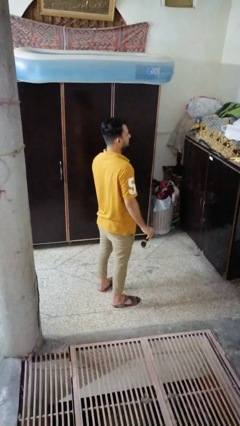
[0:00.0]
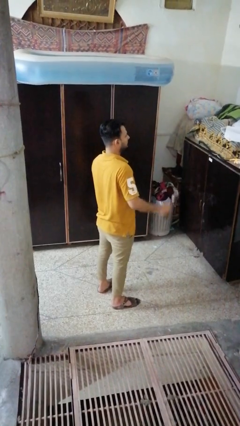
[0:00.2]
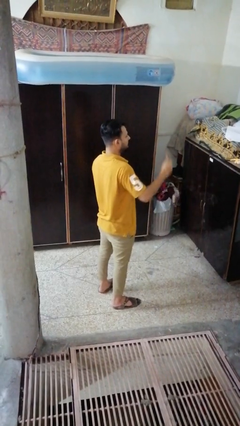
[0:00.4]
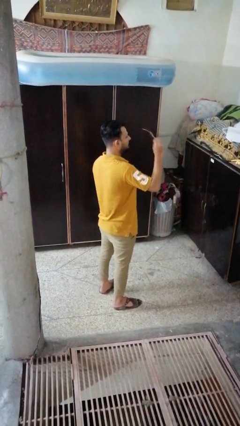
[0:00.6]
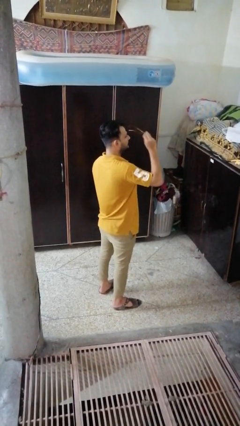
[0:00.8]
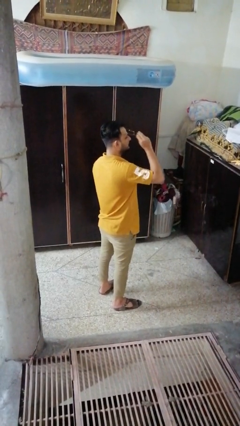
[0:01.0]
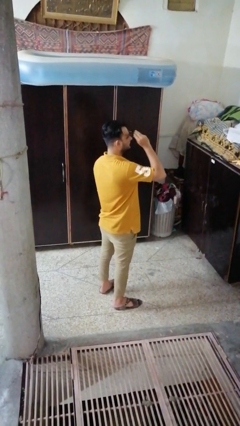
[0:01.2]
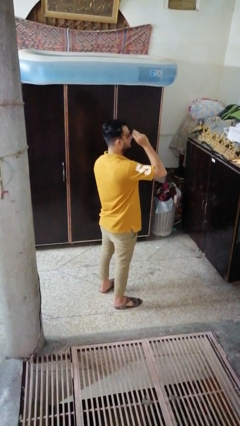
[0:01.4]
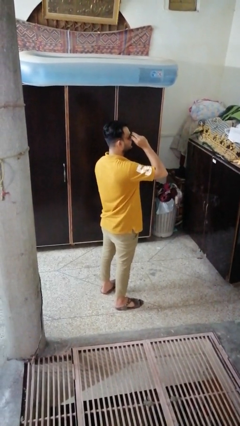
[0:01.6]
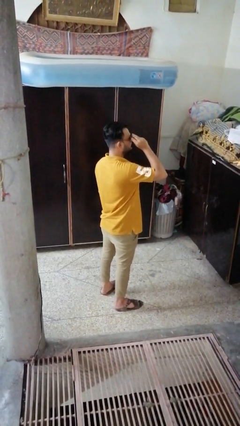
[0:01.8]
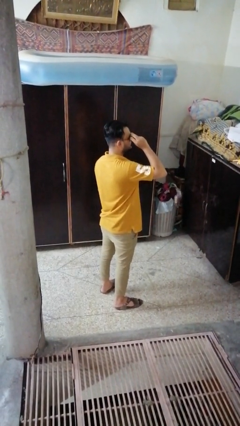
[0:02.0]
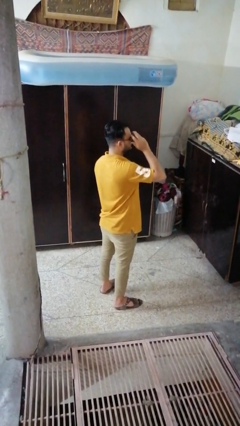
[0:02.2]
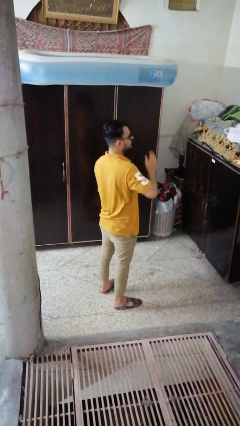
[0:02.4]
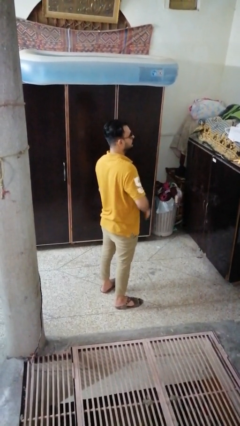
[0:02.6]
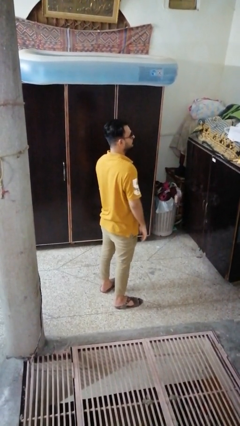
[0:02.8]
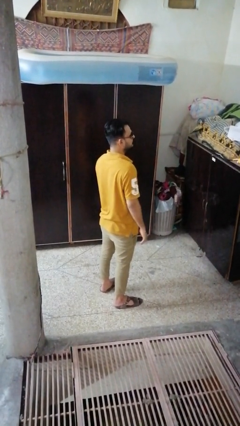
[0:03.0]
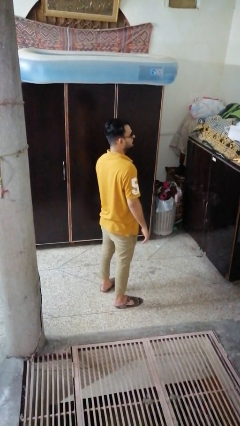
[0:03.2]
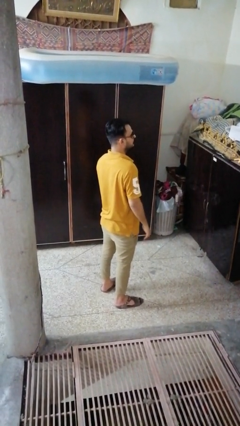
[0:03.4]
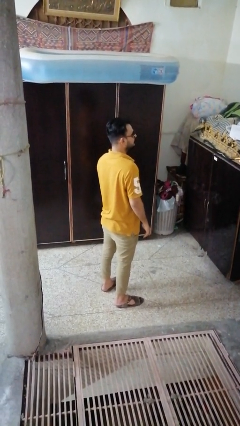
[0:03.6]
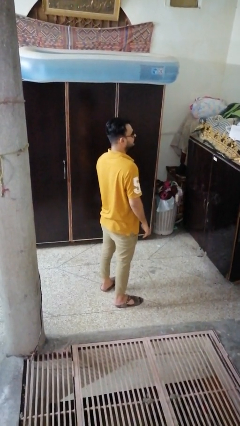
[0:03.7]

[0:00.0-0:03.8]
person puts on sunglasses

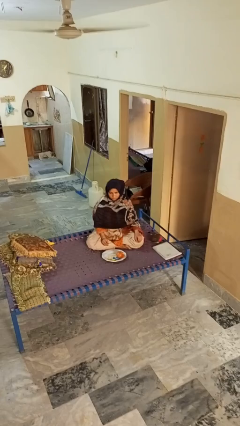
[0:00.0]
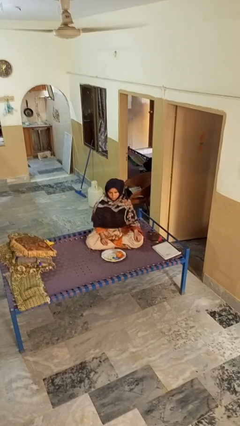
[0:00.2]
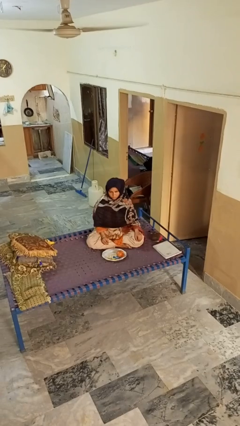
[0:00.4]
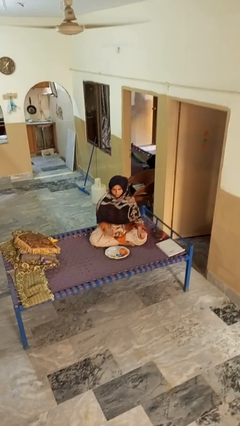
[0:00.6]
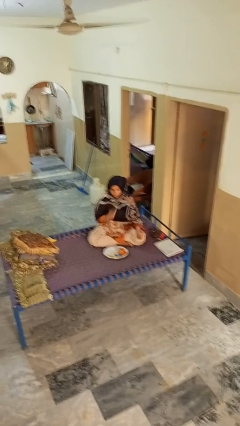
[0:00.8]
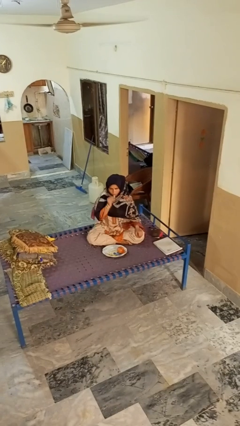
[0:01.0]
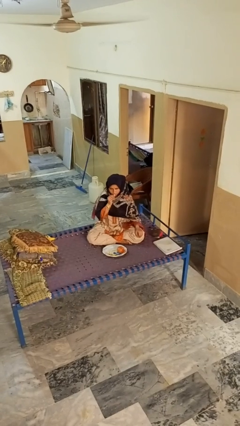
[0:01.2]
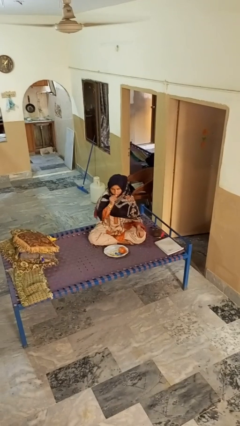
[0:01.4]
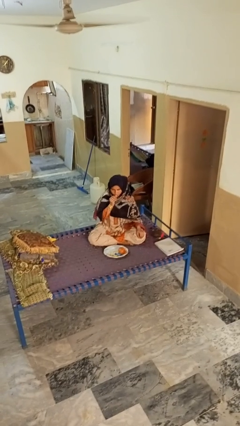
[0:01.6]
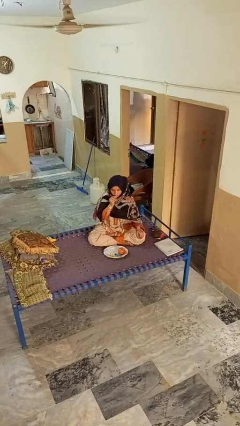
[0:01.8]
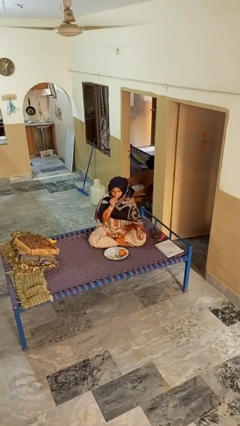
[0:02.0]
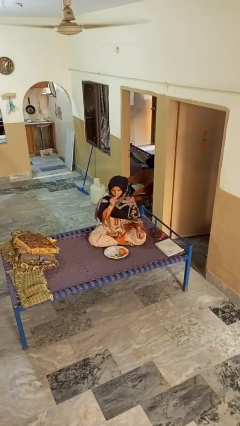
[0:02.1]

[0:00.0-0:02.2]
person eats apple

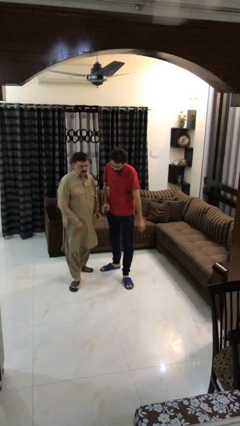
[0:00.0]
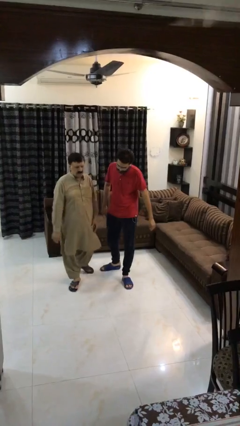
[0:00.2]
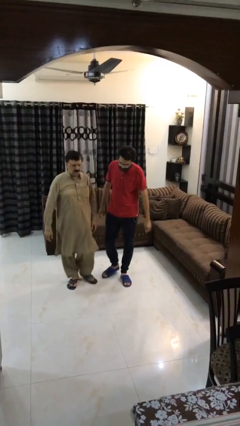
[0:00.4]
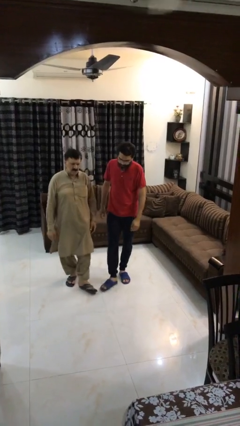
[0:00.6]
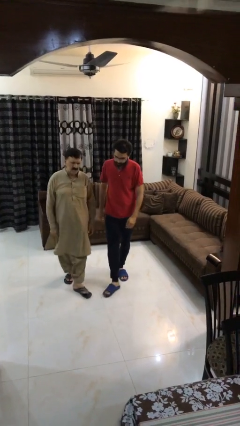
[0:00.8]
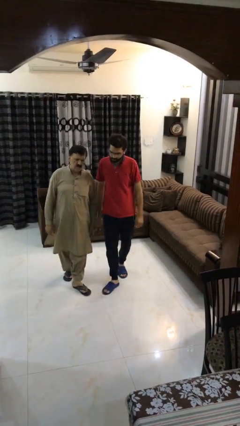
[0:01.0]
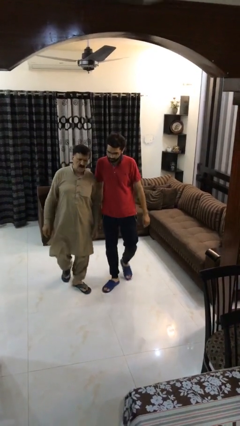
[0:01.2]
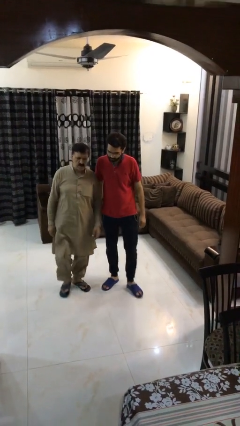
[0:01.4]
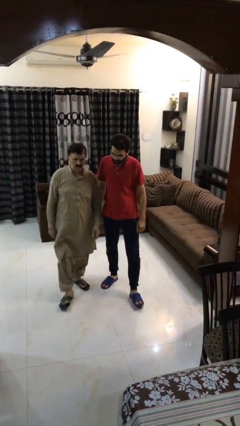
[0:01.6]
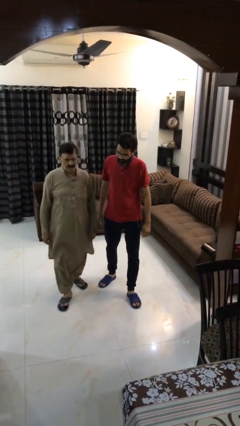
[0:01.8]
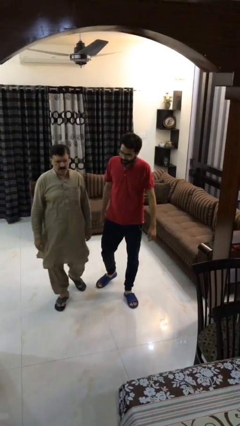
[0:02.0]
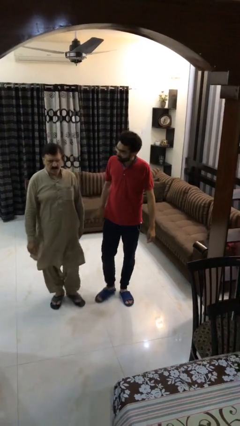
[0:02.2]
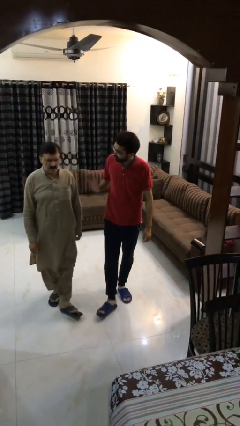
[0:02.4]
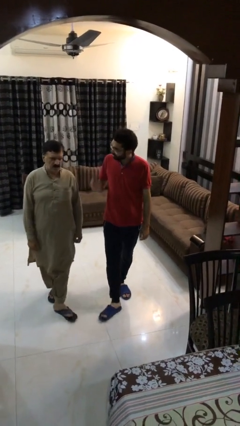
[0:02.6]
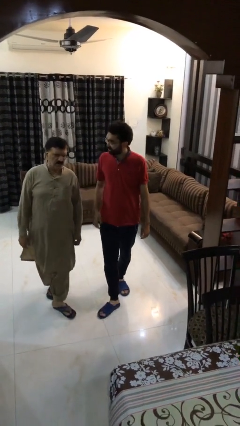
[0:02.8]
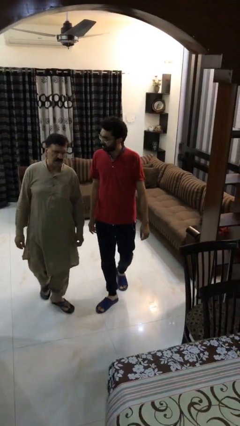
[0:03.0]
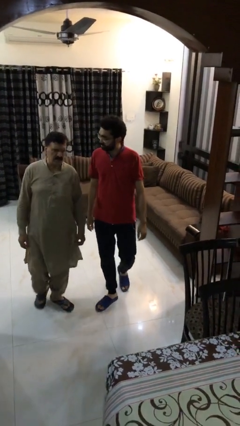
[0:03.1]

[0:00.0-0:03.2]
person talks to person

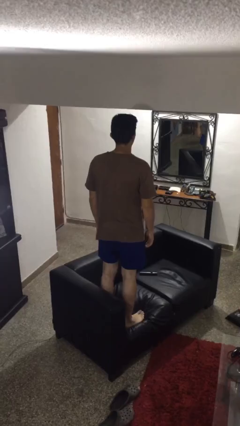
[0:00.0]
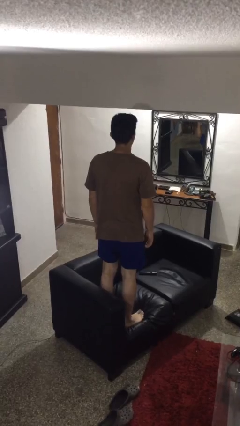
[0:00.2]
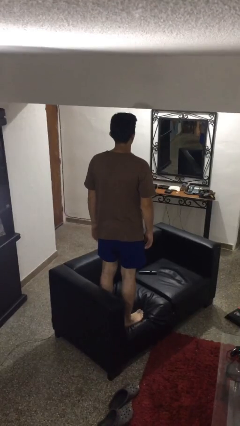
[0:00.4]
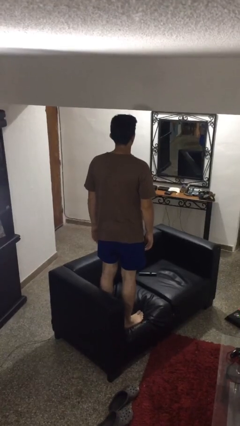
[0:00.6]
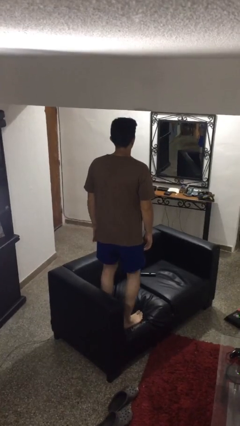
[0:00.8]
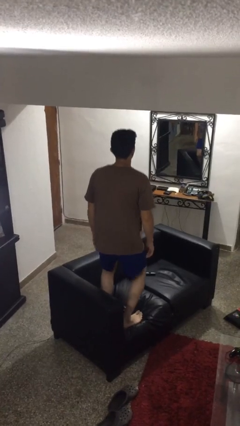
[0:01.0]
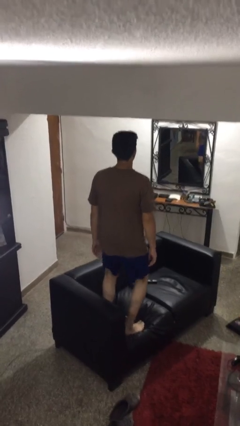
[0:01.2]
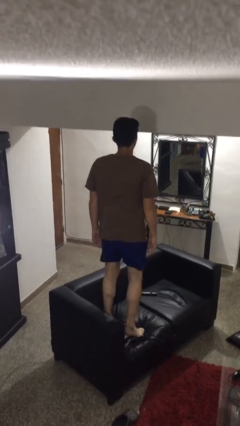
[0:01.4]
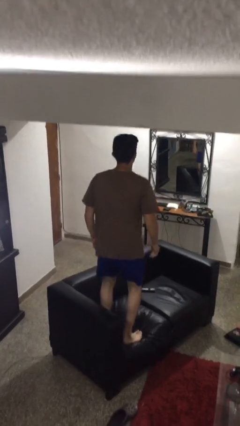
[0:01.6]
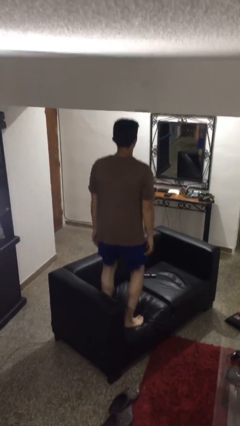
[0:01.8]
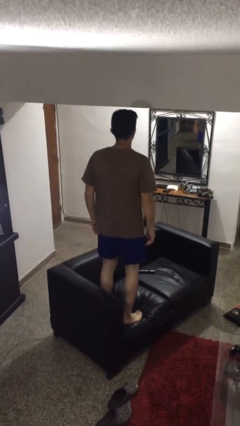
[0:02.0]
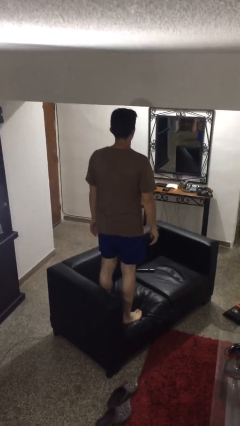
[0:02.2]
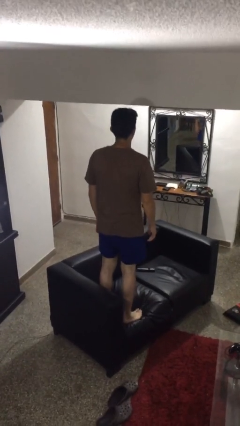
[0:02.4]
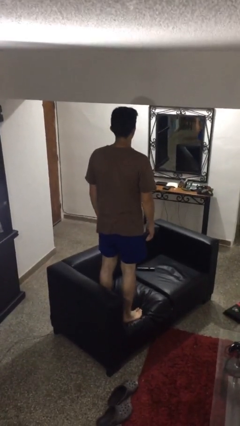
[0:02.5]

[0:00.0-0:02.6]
person jumps on couch

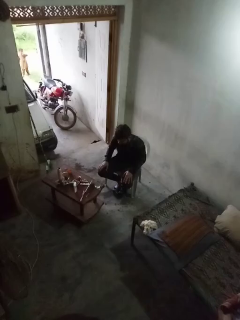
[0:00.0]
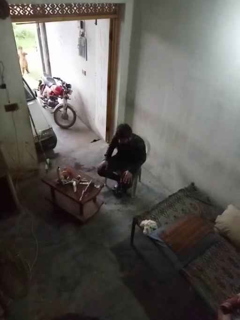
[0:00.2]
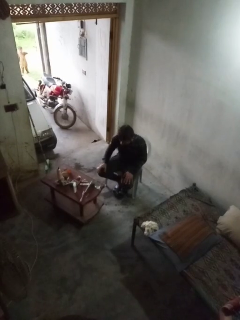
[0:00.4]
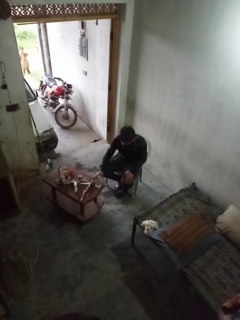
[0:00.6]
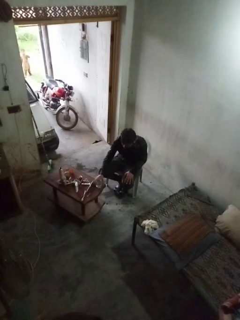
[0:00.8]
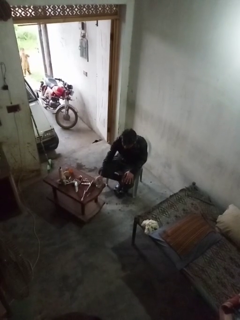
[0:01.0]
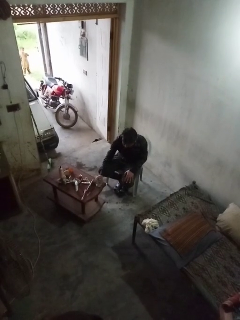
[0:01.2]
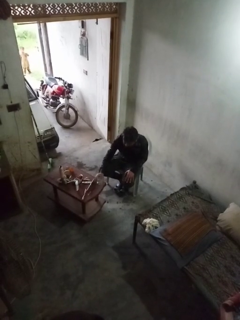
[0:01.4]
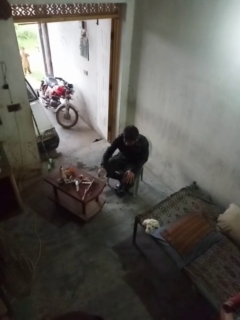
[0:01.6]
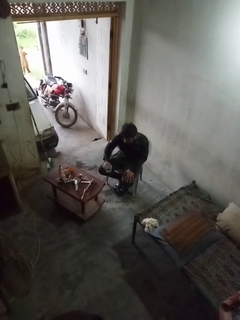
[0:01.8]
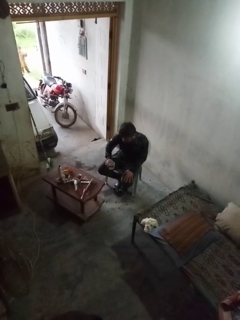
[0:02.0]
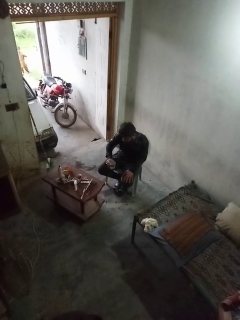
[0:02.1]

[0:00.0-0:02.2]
person picks up object from table

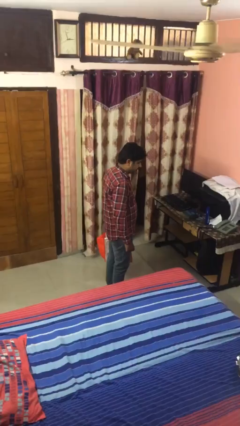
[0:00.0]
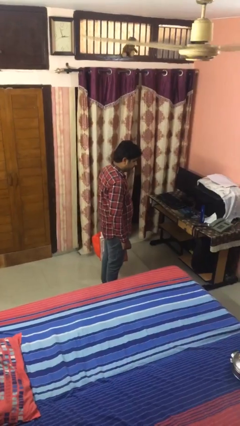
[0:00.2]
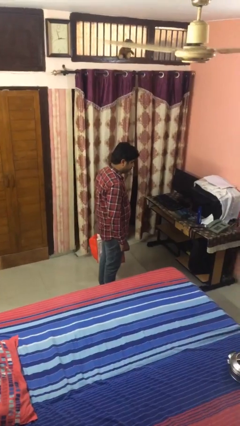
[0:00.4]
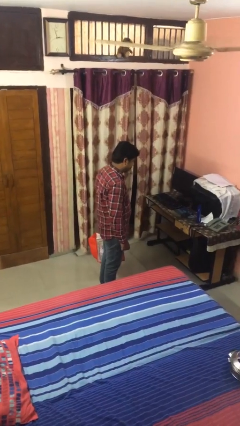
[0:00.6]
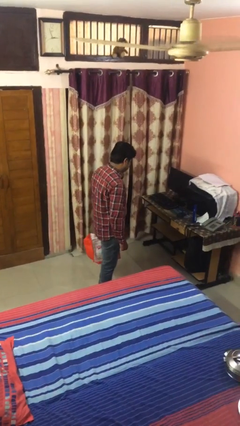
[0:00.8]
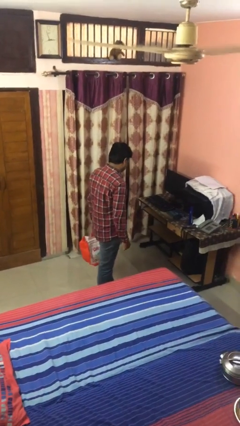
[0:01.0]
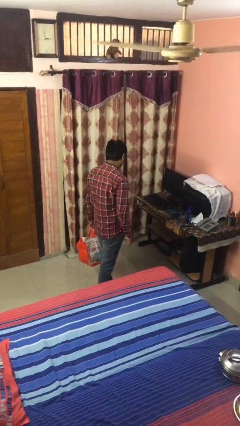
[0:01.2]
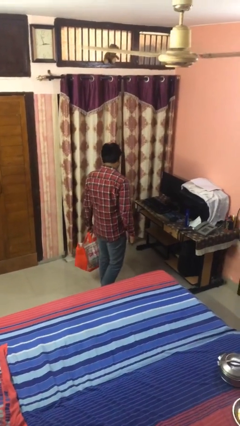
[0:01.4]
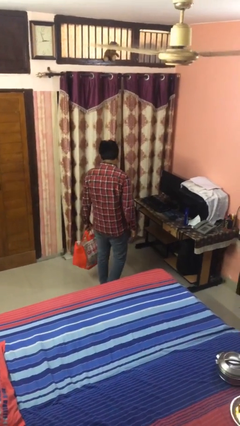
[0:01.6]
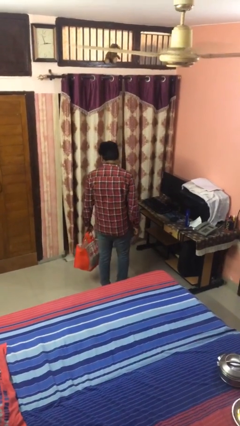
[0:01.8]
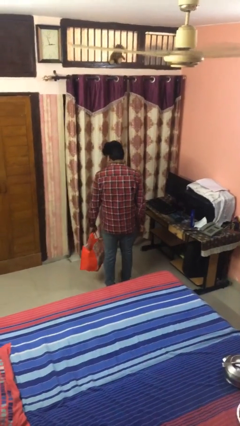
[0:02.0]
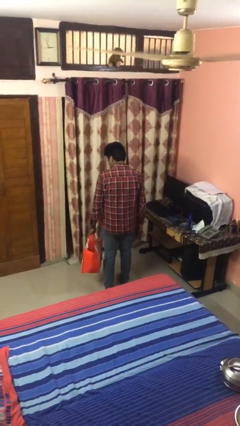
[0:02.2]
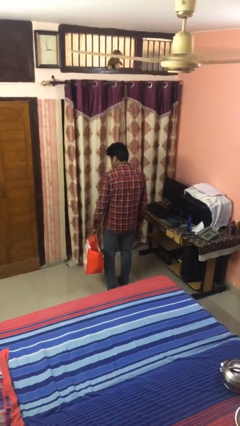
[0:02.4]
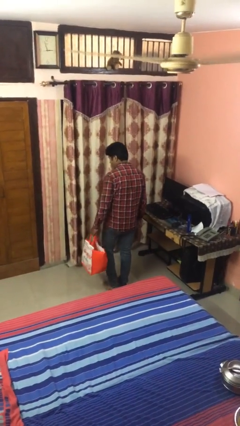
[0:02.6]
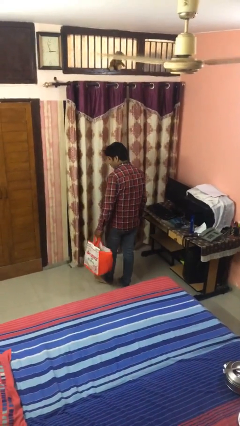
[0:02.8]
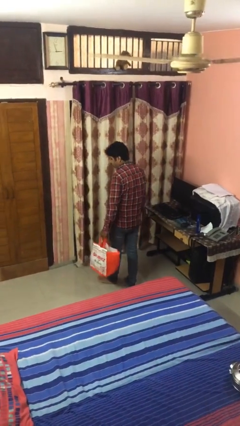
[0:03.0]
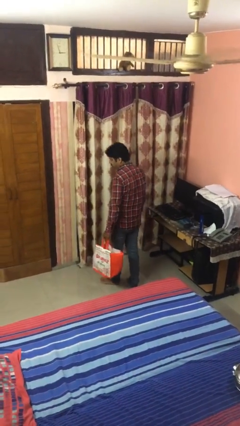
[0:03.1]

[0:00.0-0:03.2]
person carries groceries

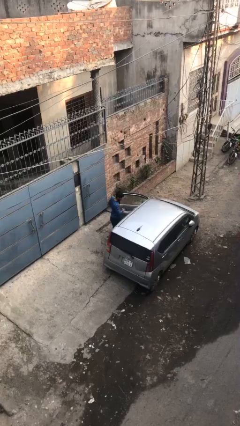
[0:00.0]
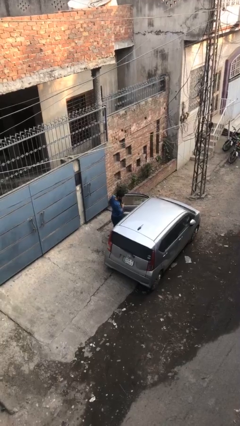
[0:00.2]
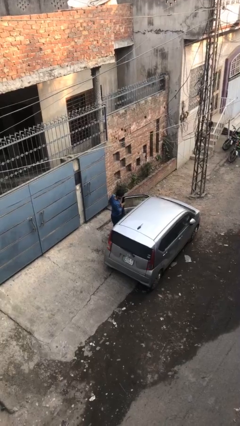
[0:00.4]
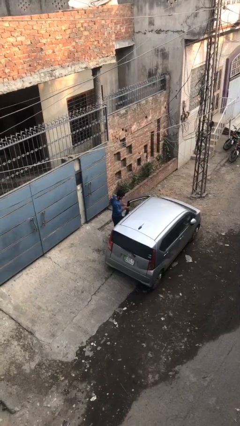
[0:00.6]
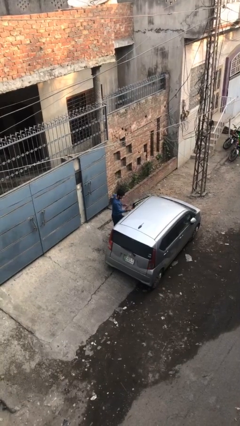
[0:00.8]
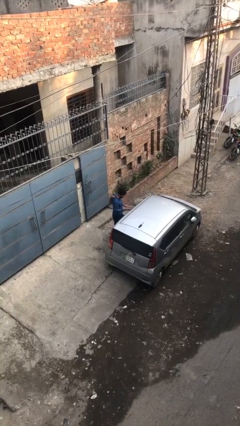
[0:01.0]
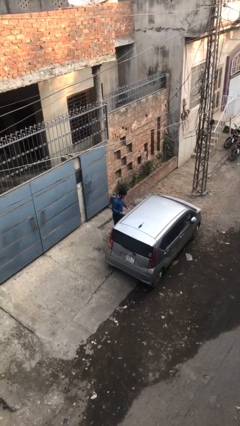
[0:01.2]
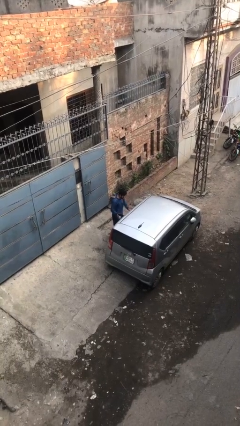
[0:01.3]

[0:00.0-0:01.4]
person closes car door
